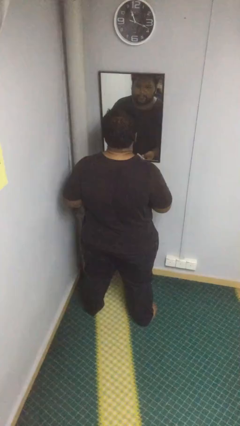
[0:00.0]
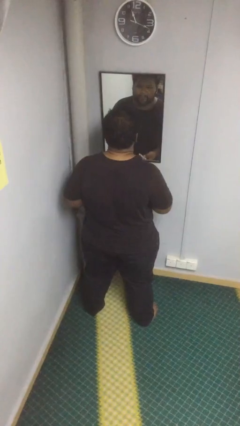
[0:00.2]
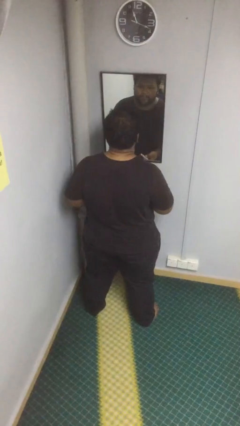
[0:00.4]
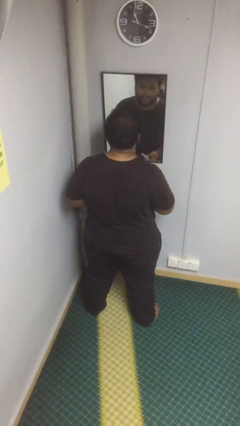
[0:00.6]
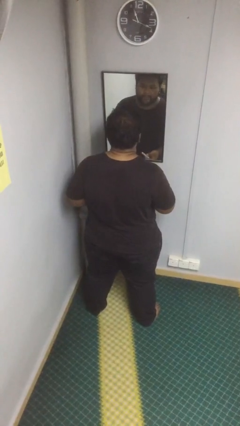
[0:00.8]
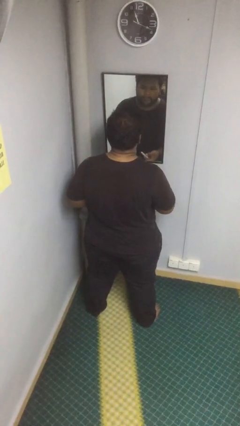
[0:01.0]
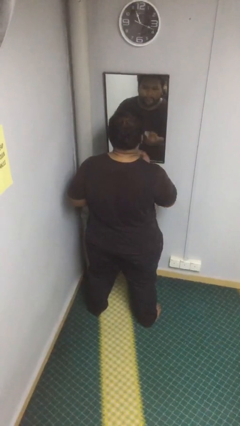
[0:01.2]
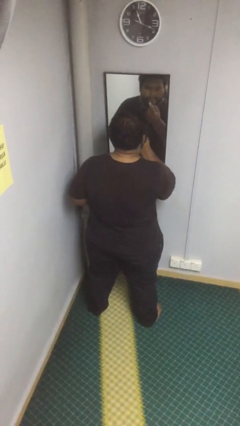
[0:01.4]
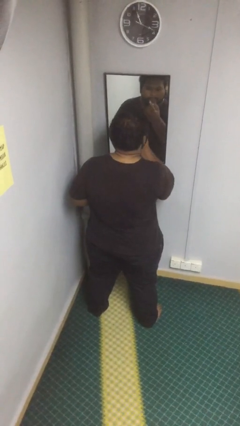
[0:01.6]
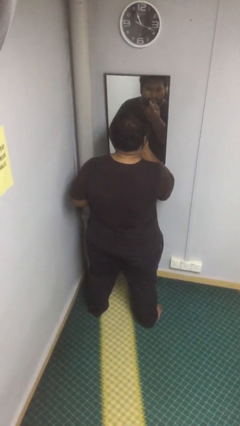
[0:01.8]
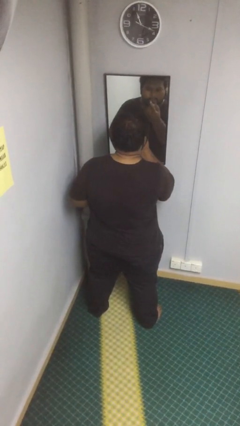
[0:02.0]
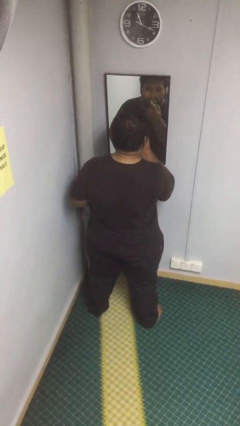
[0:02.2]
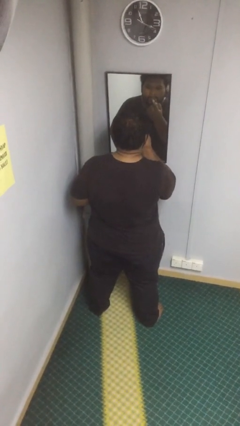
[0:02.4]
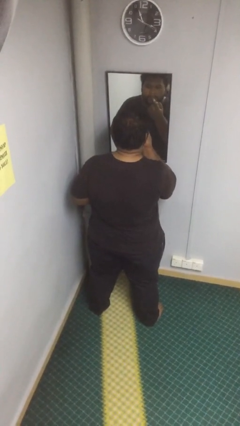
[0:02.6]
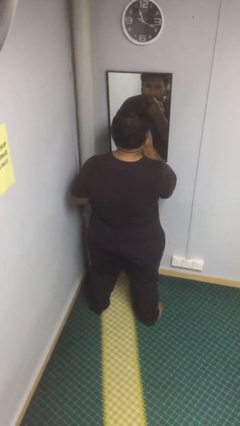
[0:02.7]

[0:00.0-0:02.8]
person applies lip makeup

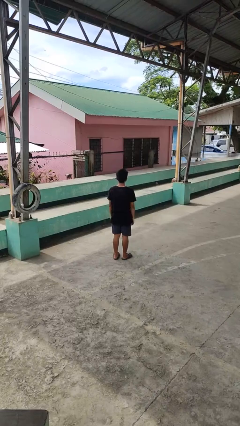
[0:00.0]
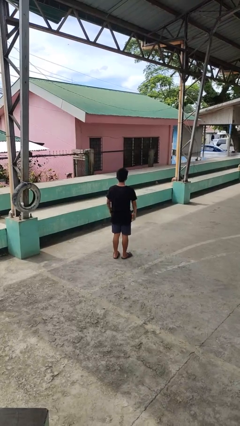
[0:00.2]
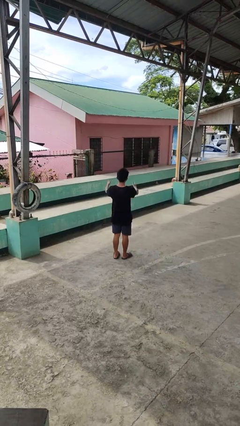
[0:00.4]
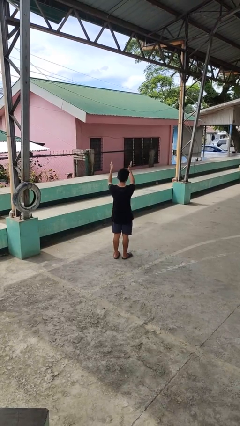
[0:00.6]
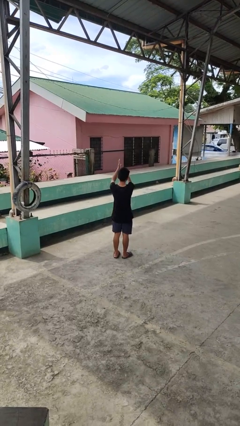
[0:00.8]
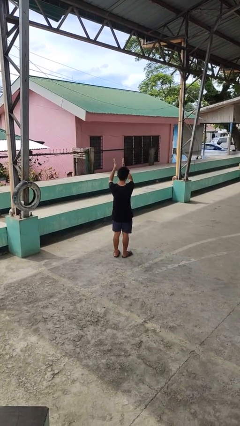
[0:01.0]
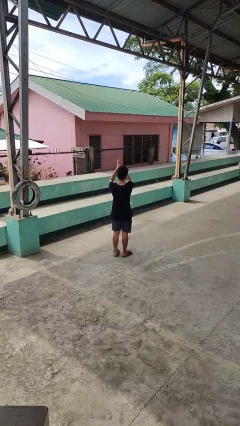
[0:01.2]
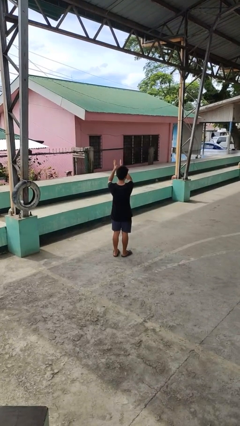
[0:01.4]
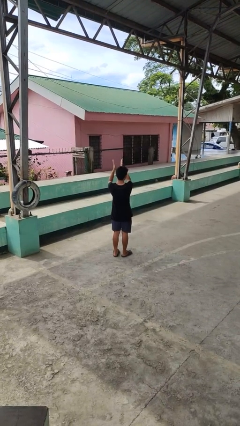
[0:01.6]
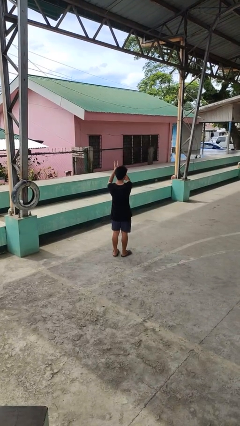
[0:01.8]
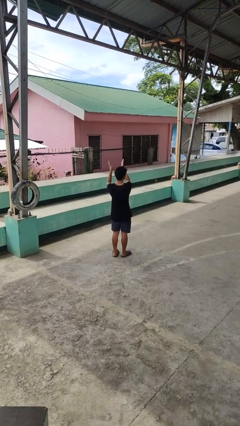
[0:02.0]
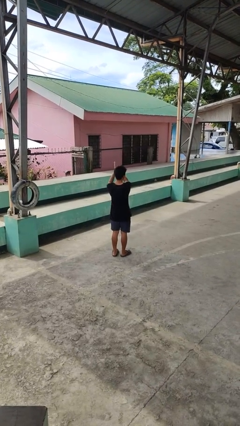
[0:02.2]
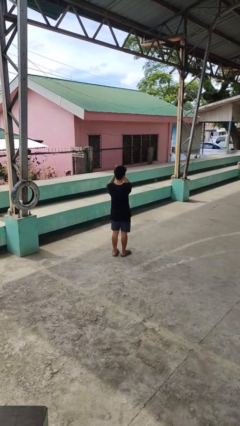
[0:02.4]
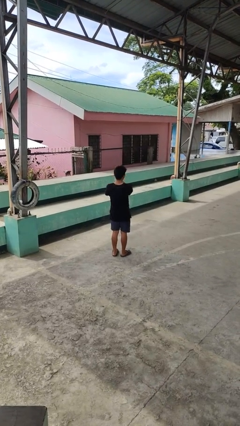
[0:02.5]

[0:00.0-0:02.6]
person claps hands

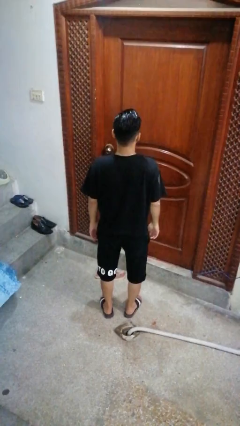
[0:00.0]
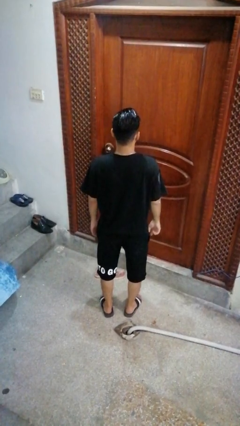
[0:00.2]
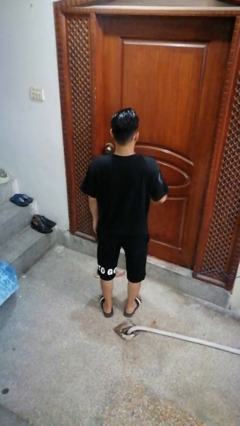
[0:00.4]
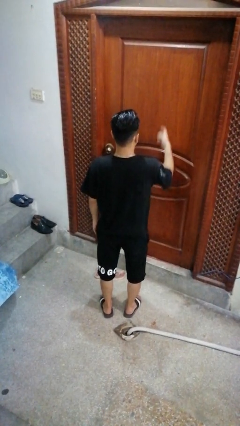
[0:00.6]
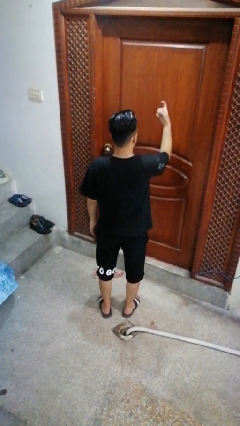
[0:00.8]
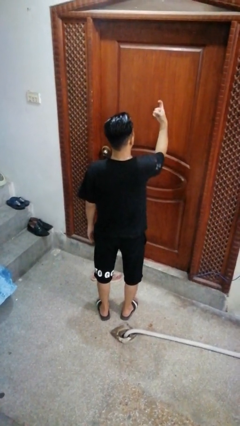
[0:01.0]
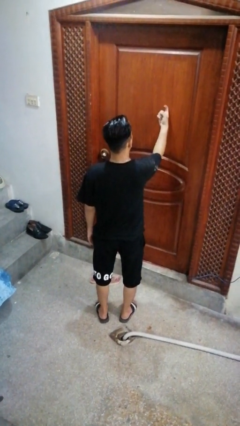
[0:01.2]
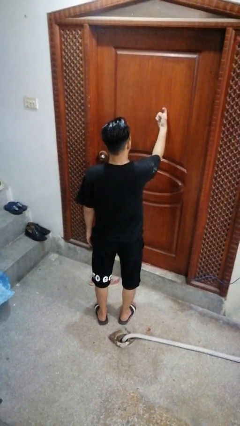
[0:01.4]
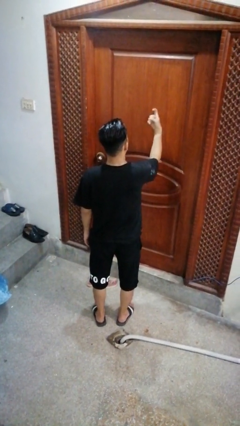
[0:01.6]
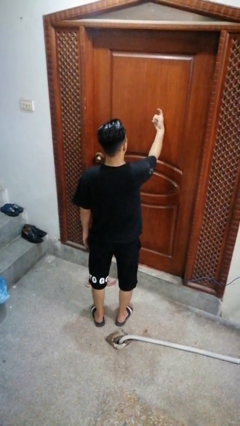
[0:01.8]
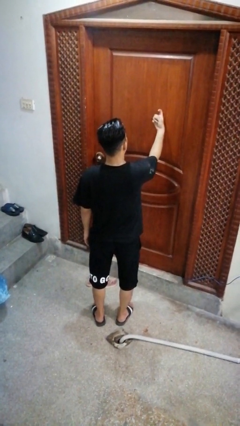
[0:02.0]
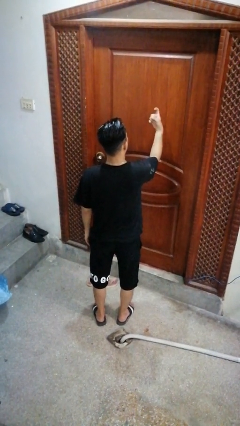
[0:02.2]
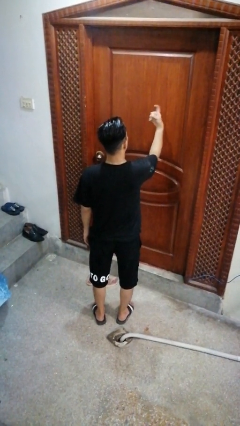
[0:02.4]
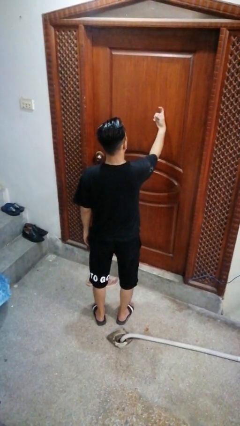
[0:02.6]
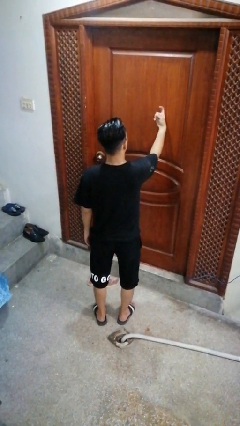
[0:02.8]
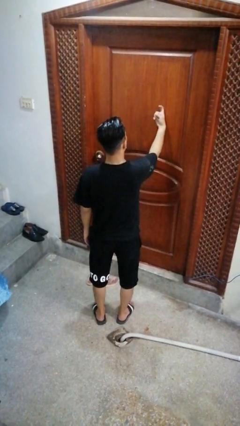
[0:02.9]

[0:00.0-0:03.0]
person taps object with finger

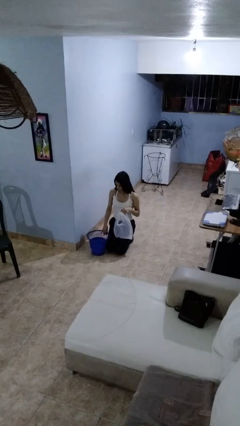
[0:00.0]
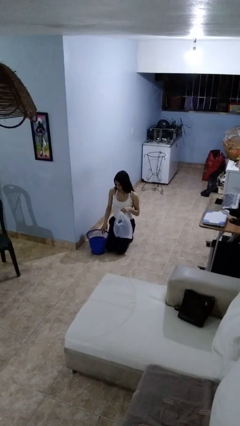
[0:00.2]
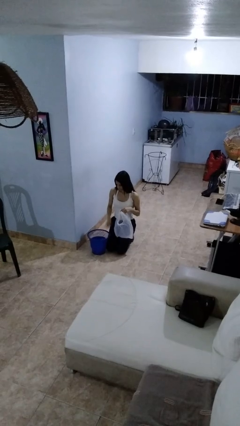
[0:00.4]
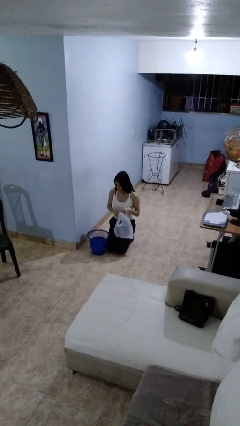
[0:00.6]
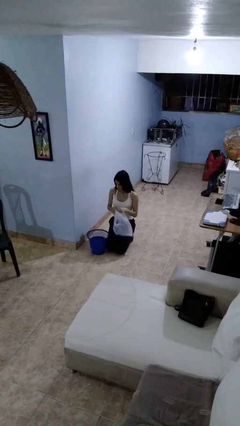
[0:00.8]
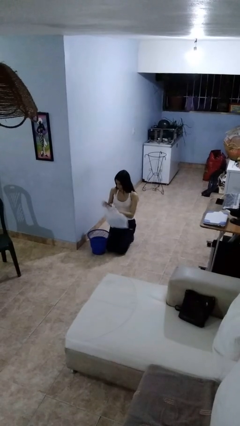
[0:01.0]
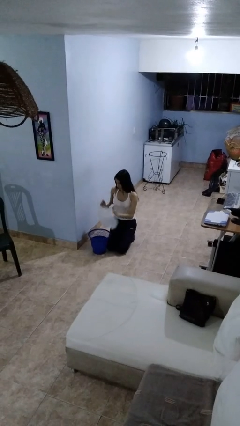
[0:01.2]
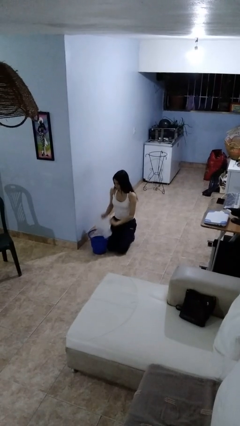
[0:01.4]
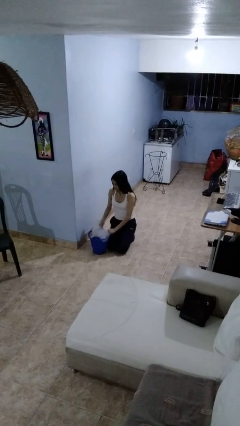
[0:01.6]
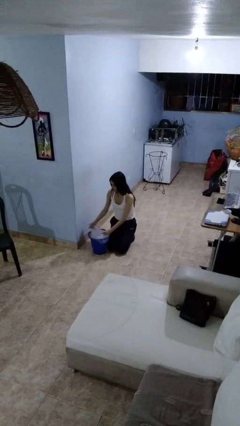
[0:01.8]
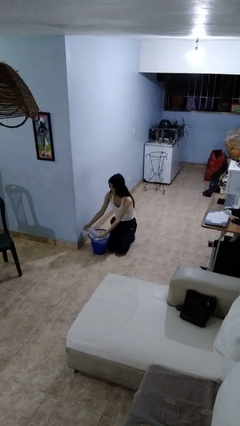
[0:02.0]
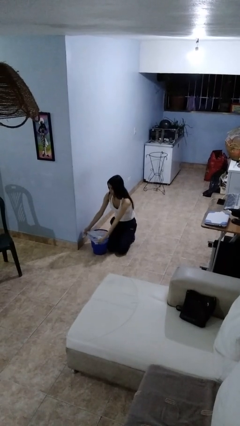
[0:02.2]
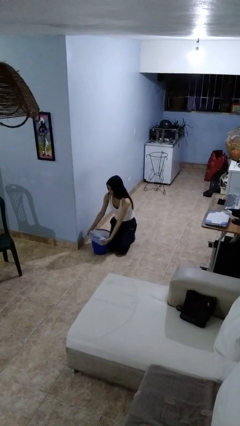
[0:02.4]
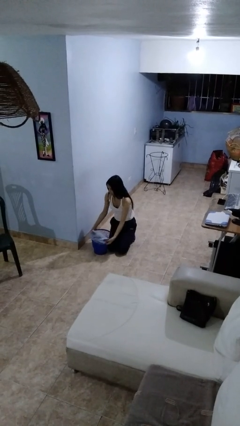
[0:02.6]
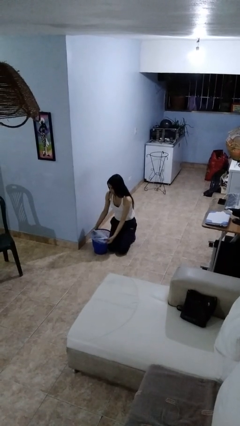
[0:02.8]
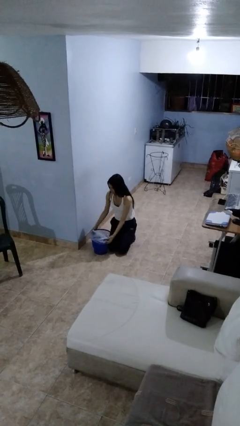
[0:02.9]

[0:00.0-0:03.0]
person inserts trashbag into trashcan

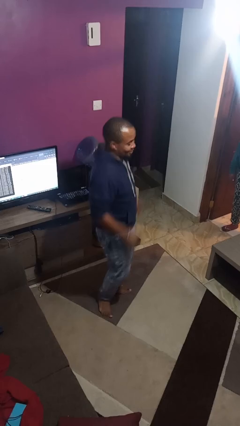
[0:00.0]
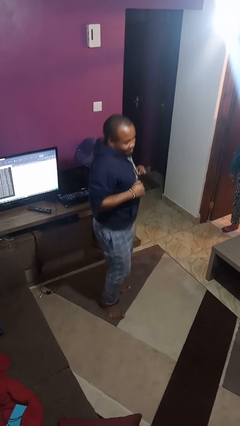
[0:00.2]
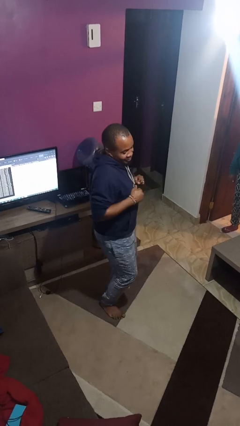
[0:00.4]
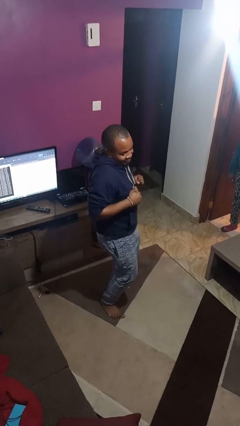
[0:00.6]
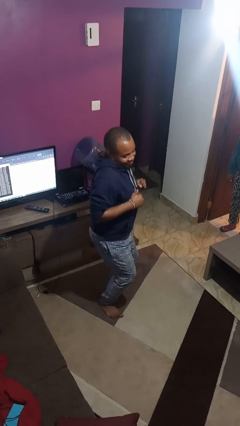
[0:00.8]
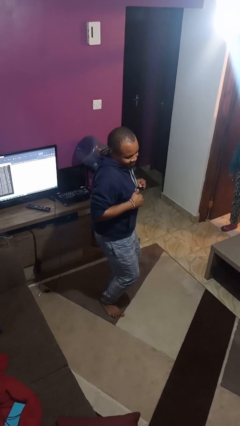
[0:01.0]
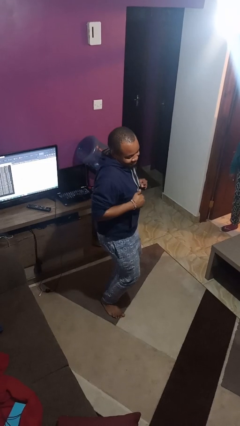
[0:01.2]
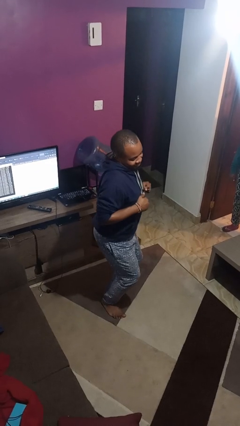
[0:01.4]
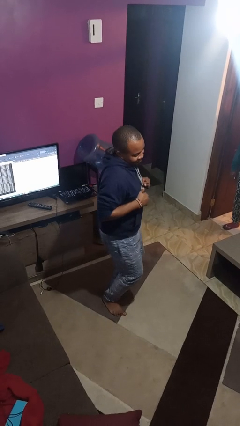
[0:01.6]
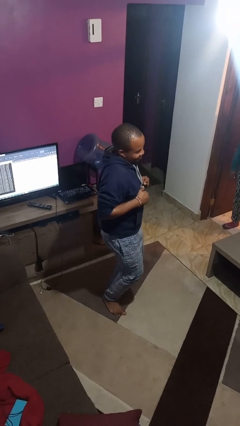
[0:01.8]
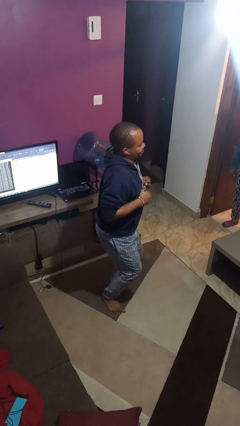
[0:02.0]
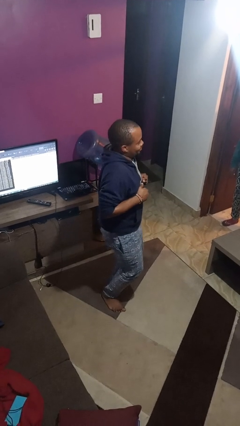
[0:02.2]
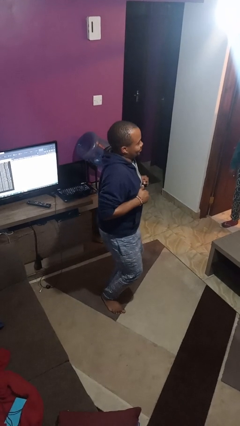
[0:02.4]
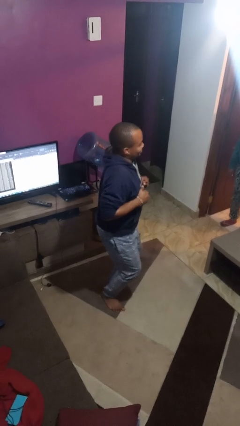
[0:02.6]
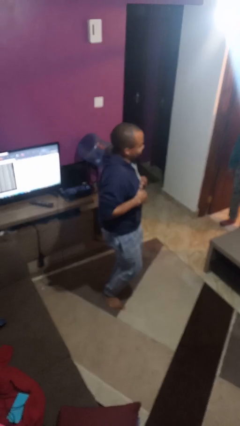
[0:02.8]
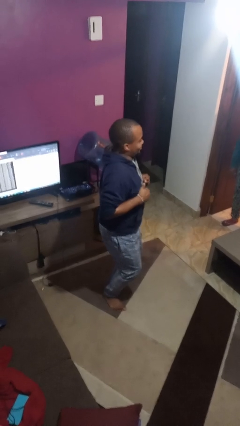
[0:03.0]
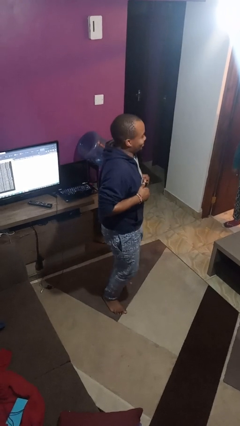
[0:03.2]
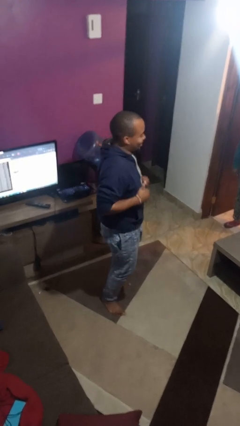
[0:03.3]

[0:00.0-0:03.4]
person wiggles hips

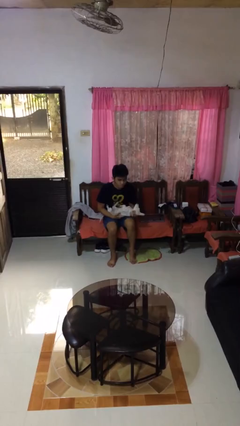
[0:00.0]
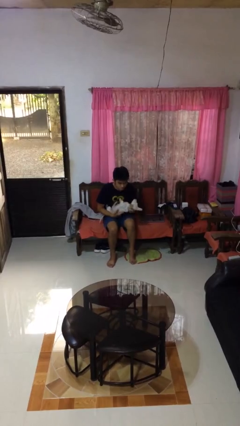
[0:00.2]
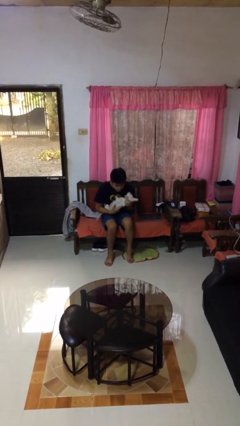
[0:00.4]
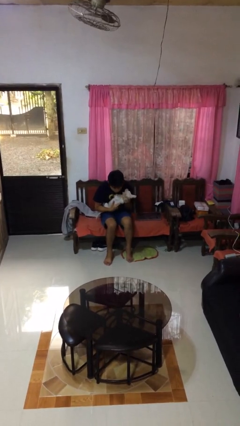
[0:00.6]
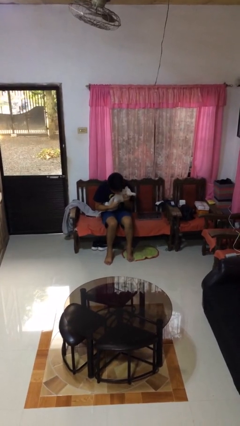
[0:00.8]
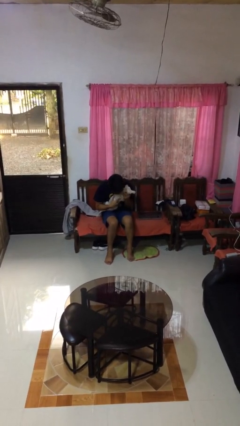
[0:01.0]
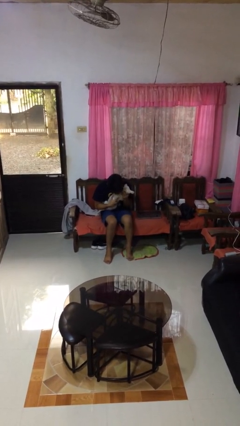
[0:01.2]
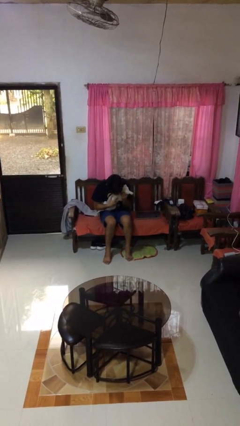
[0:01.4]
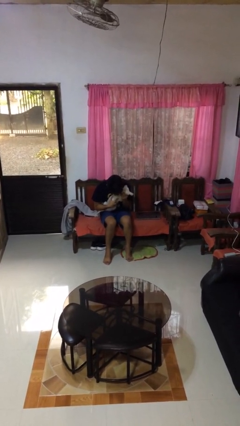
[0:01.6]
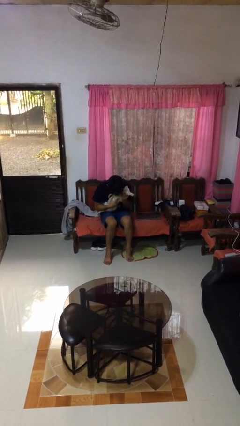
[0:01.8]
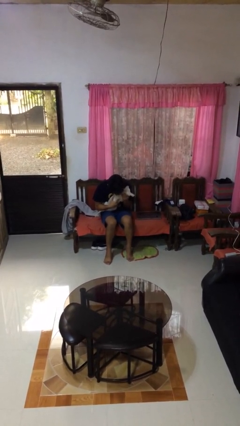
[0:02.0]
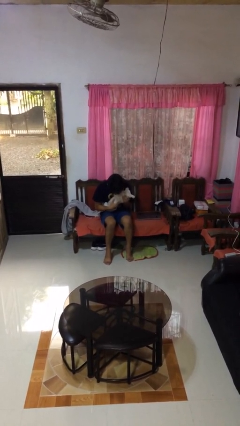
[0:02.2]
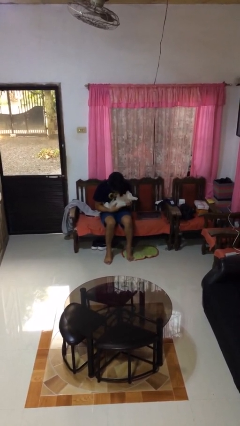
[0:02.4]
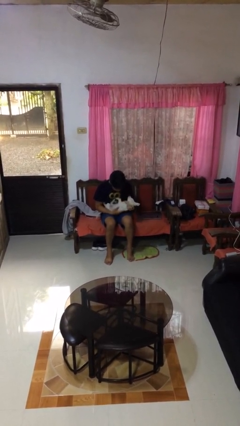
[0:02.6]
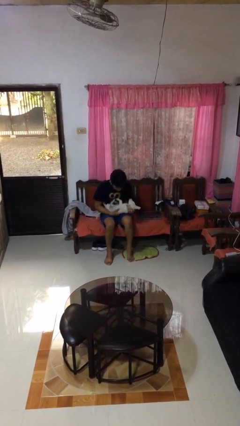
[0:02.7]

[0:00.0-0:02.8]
person hugs dog

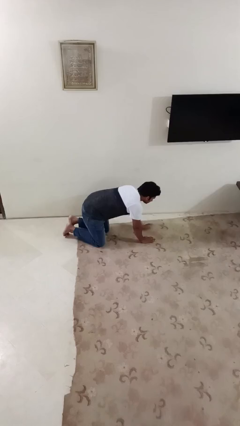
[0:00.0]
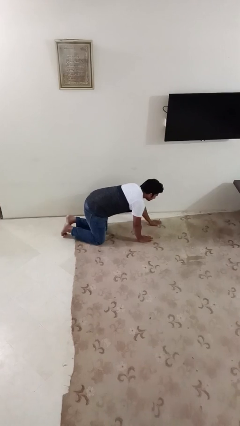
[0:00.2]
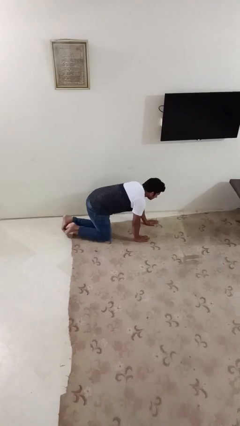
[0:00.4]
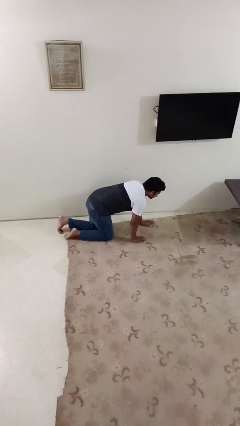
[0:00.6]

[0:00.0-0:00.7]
person crawls
